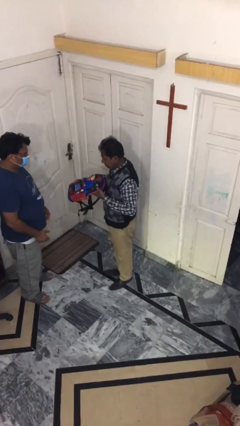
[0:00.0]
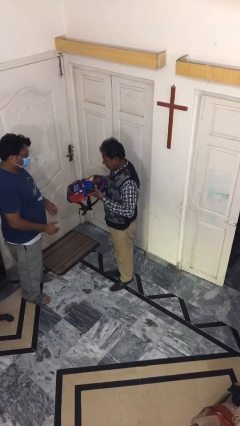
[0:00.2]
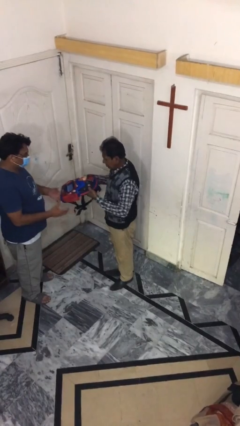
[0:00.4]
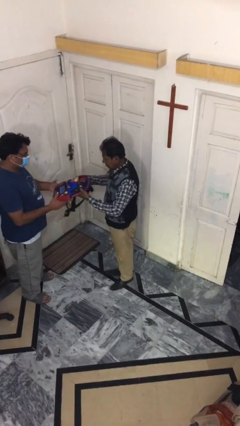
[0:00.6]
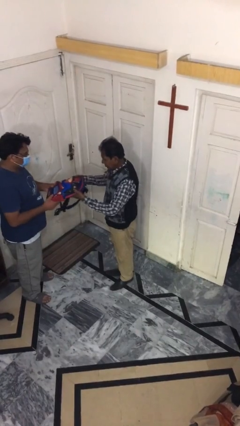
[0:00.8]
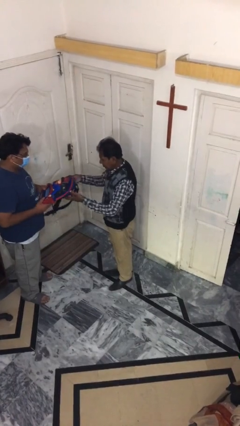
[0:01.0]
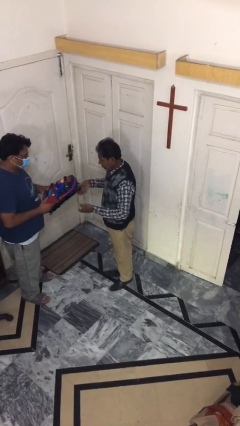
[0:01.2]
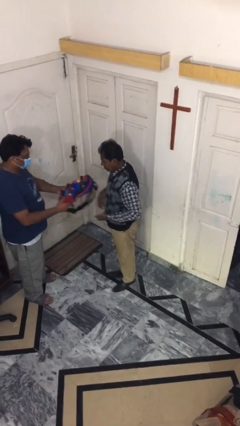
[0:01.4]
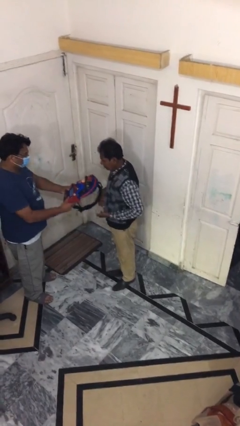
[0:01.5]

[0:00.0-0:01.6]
person transfers object to person

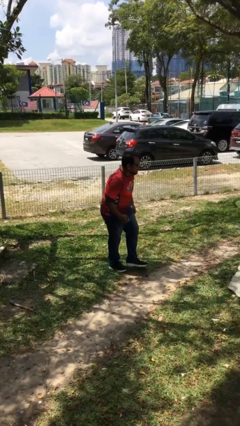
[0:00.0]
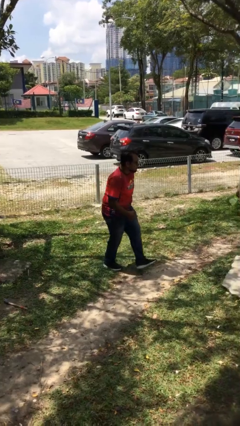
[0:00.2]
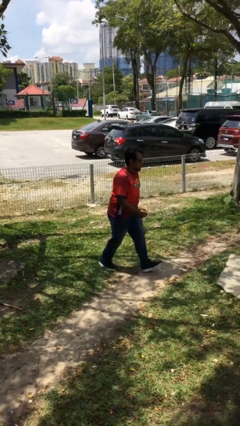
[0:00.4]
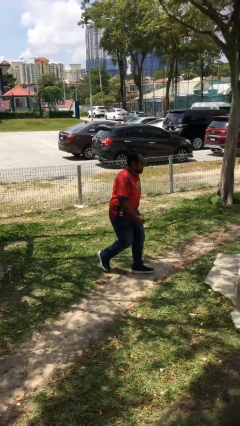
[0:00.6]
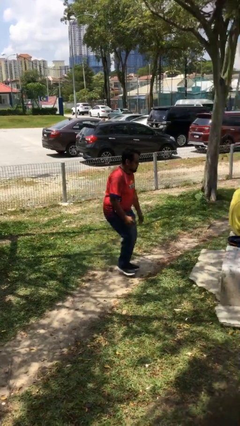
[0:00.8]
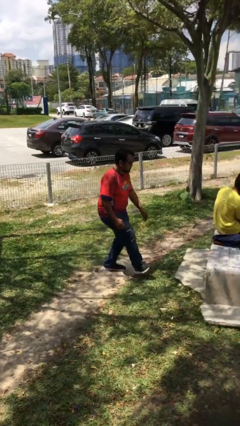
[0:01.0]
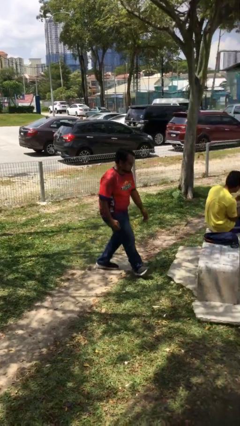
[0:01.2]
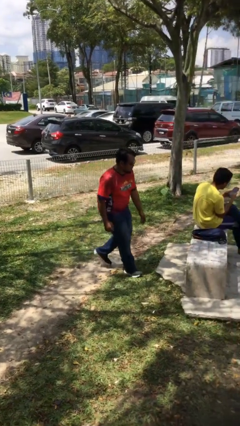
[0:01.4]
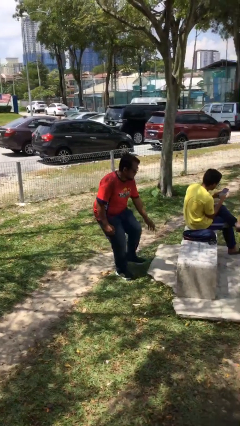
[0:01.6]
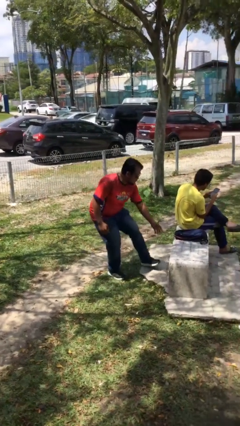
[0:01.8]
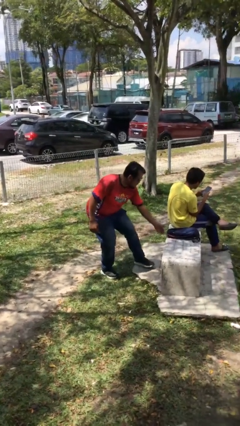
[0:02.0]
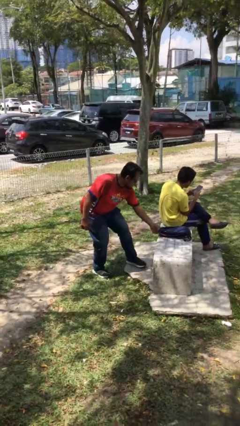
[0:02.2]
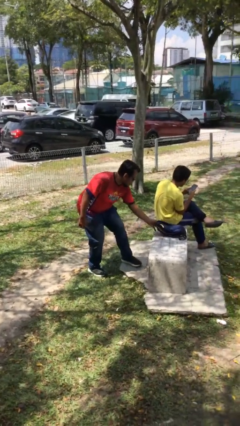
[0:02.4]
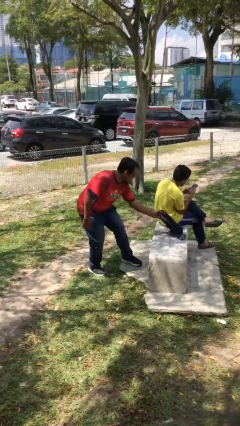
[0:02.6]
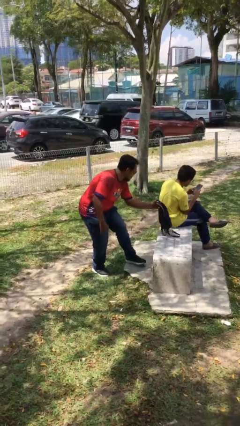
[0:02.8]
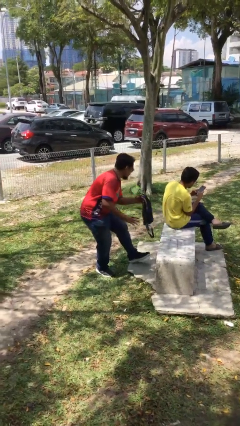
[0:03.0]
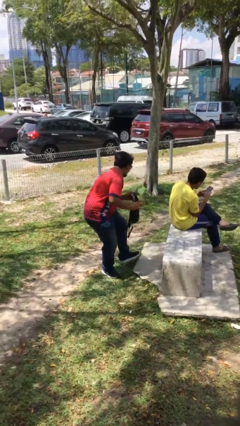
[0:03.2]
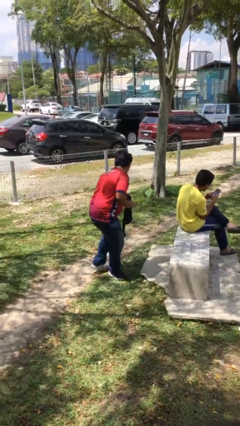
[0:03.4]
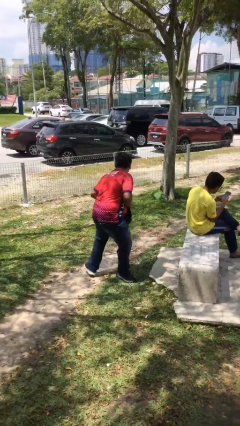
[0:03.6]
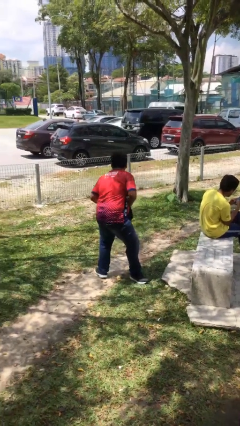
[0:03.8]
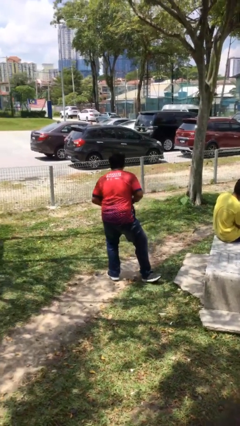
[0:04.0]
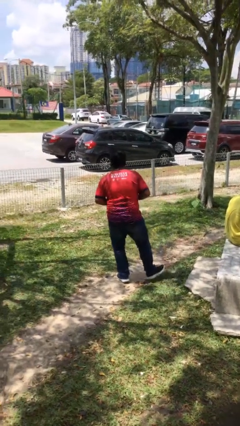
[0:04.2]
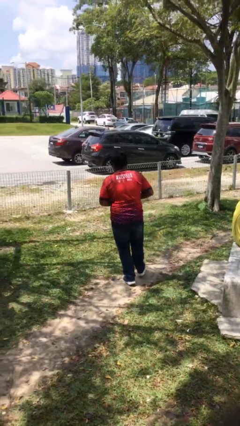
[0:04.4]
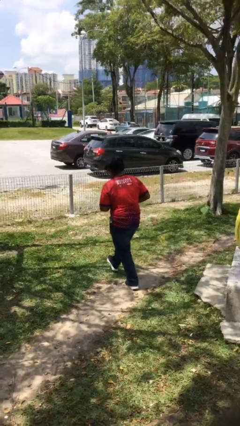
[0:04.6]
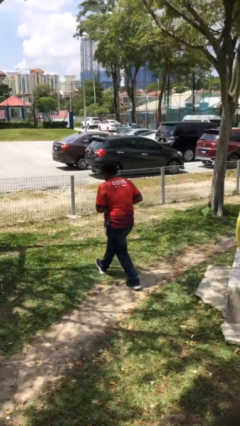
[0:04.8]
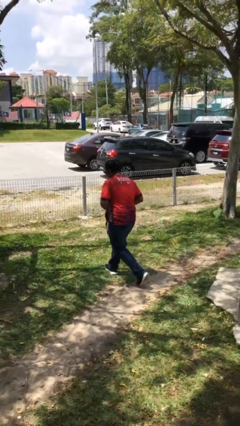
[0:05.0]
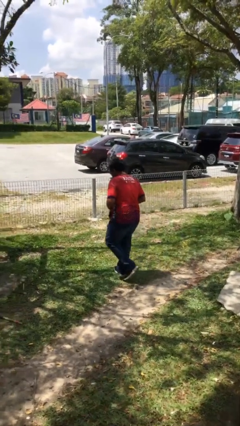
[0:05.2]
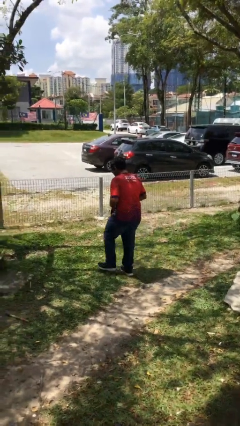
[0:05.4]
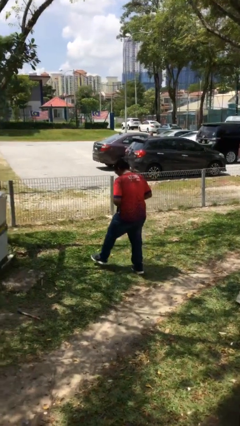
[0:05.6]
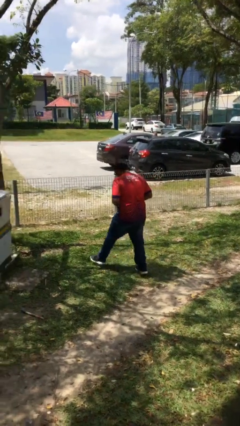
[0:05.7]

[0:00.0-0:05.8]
person steals object from person

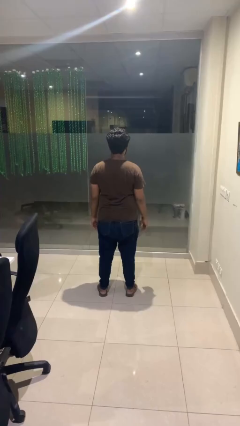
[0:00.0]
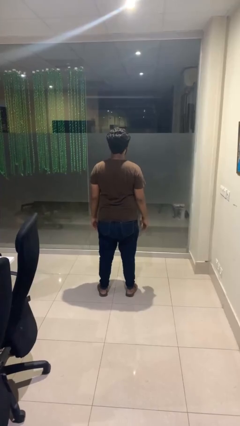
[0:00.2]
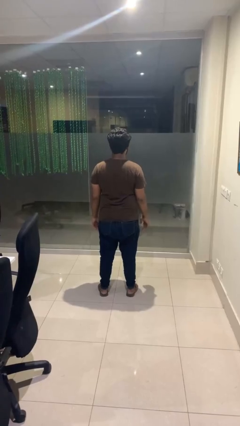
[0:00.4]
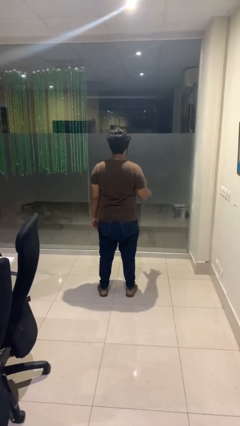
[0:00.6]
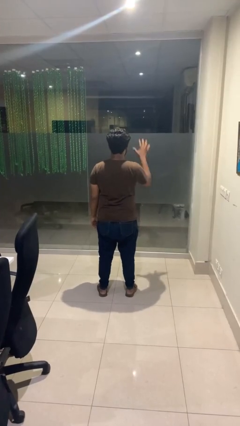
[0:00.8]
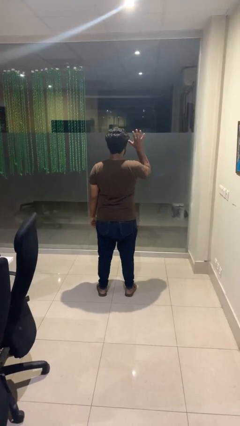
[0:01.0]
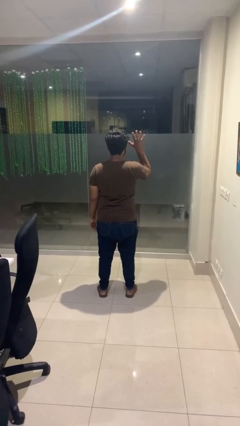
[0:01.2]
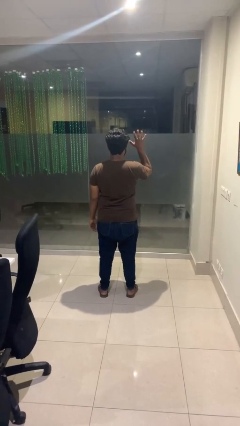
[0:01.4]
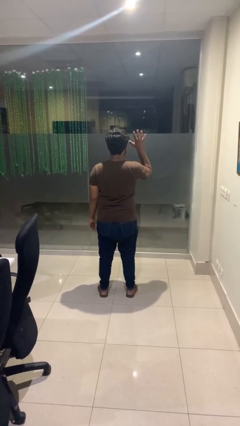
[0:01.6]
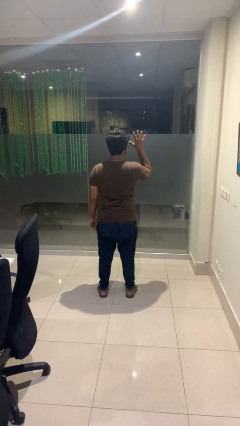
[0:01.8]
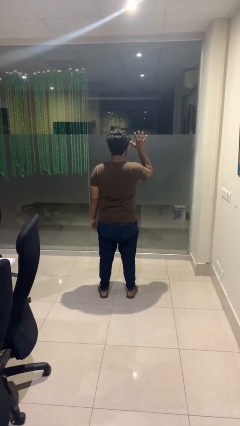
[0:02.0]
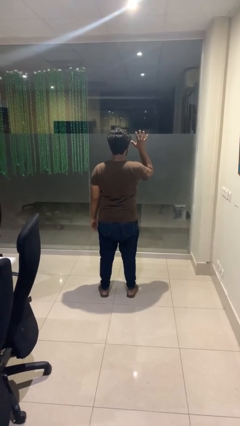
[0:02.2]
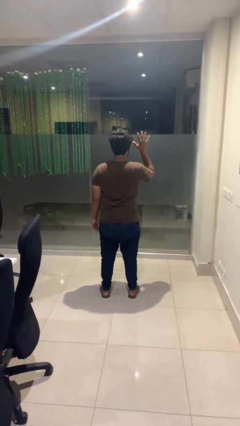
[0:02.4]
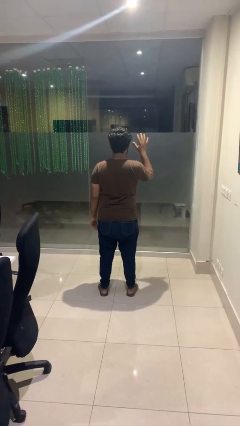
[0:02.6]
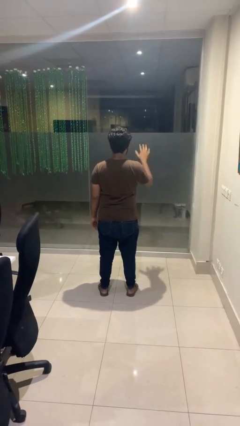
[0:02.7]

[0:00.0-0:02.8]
person gestures number five

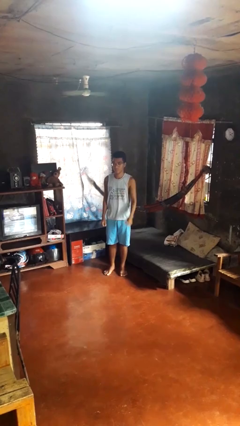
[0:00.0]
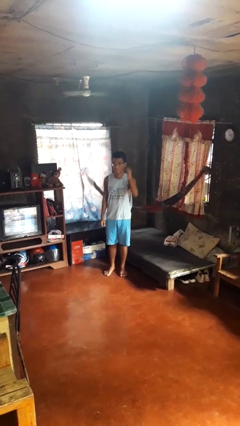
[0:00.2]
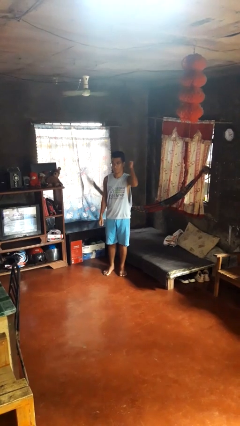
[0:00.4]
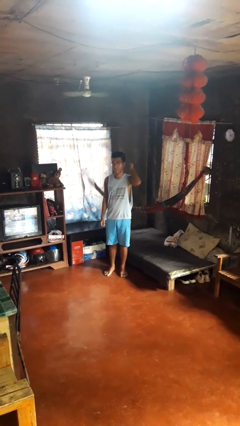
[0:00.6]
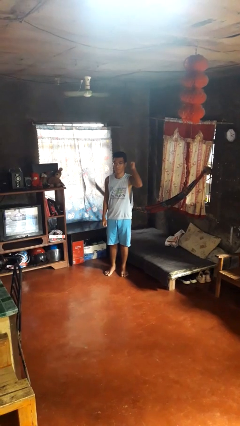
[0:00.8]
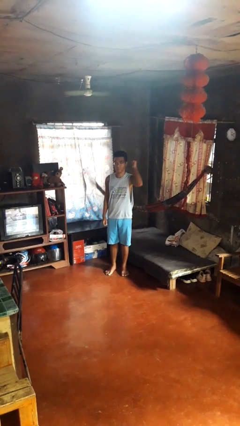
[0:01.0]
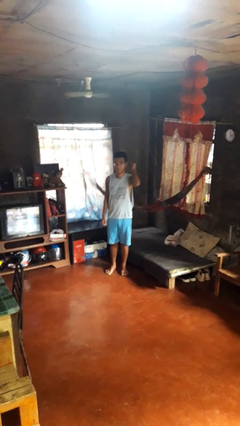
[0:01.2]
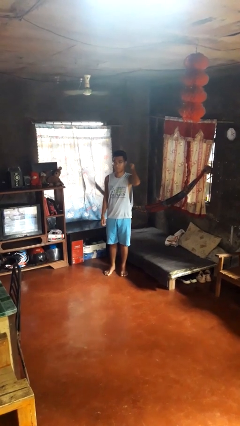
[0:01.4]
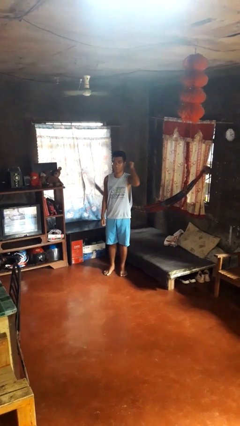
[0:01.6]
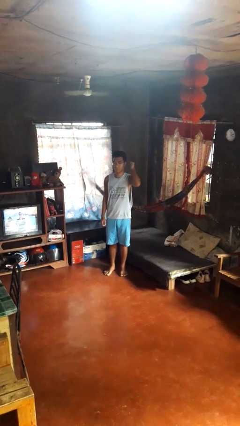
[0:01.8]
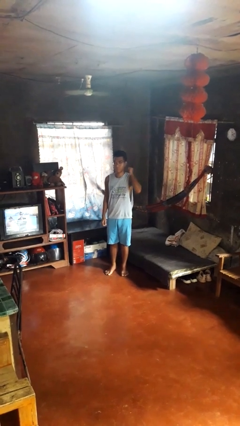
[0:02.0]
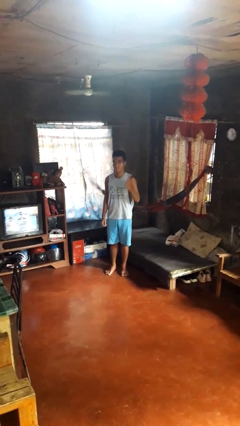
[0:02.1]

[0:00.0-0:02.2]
person gestures behind me

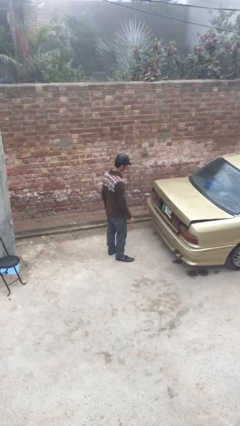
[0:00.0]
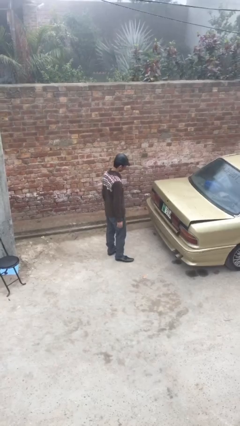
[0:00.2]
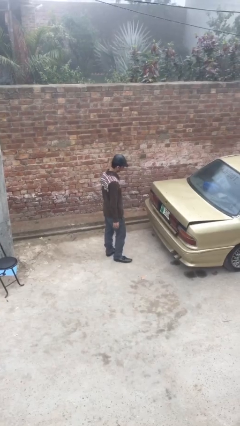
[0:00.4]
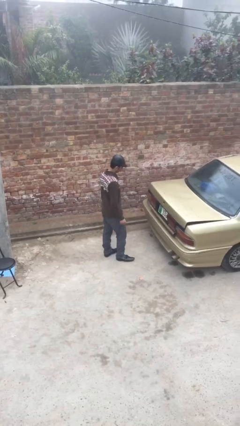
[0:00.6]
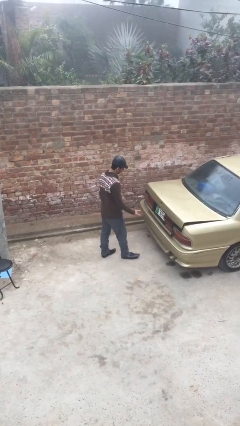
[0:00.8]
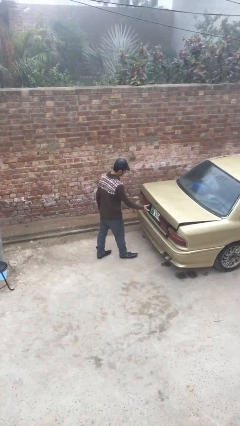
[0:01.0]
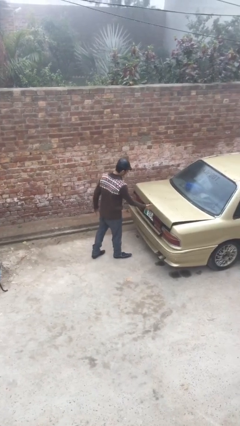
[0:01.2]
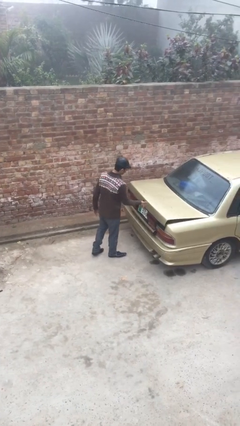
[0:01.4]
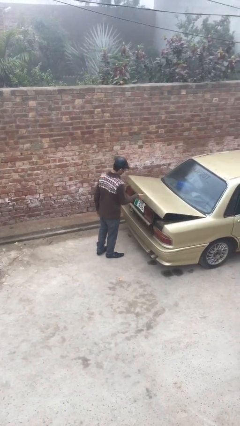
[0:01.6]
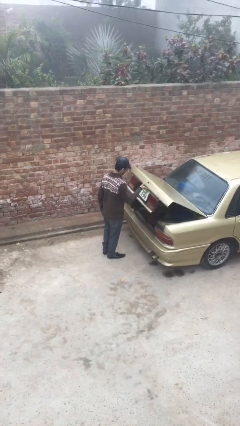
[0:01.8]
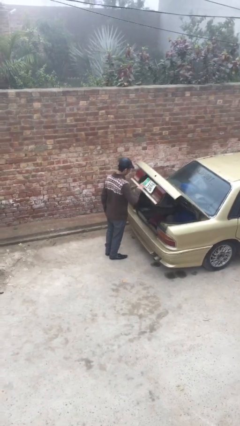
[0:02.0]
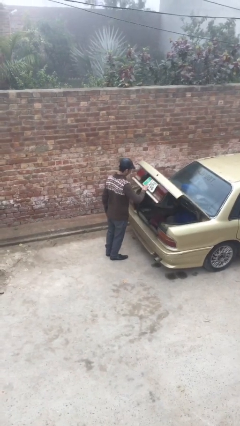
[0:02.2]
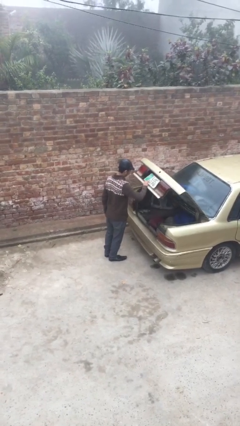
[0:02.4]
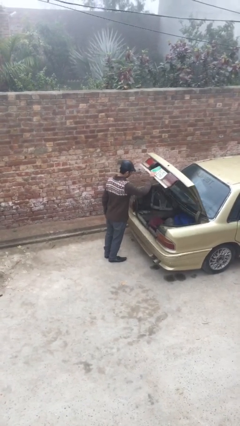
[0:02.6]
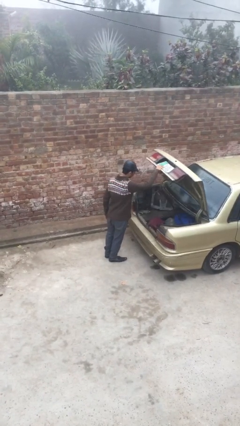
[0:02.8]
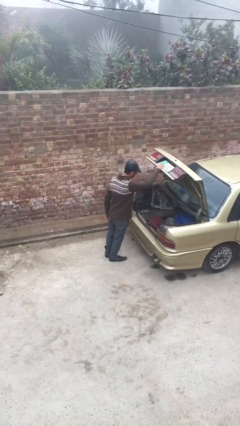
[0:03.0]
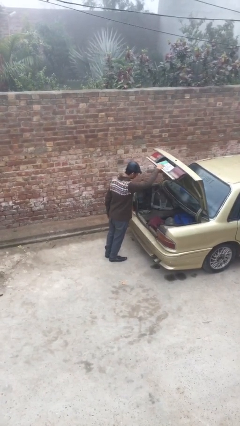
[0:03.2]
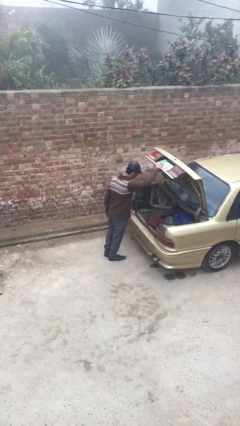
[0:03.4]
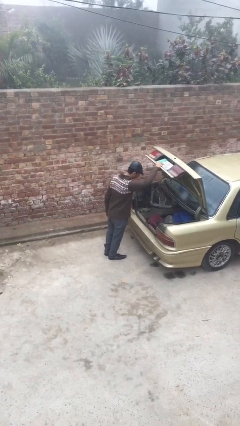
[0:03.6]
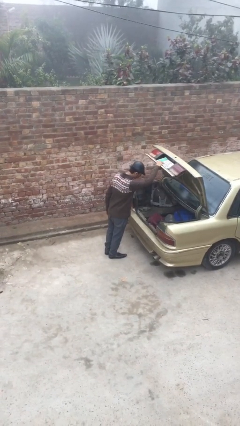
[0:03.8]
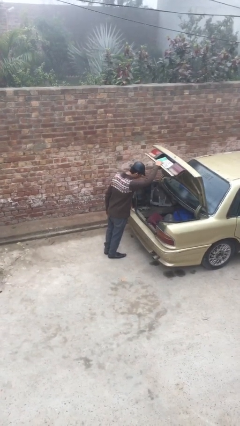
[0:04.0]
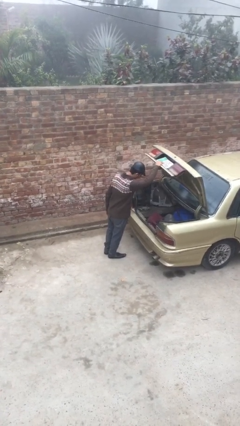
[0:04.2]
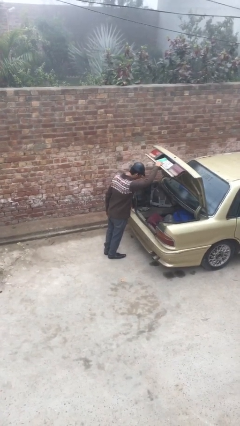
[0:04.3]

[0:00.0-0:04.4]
person opens car trunk

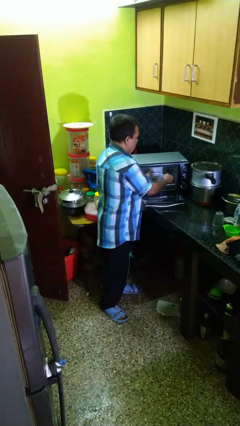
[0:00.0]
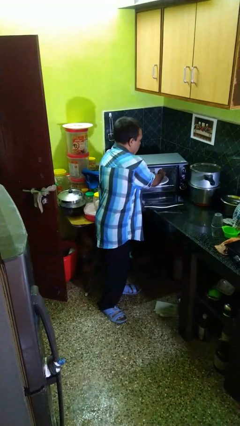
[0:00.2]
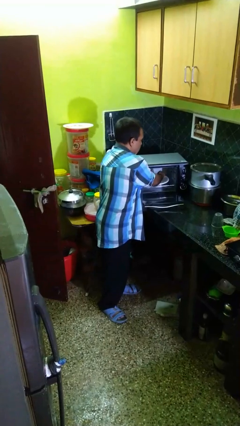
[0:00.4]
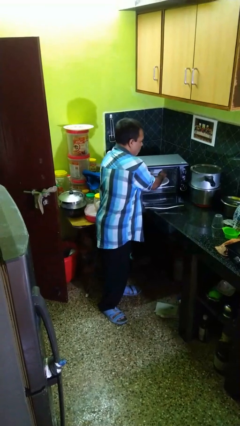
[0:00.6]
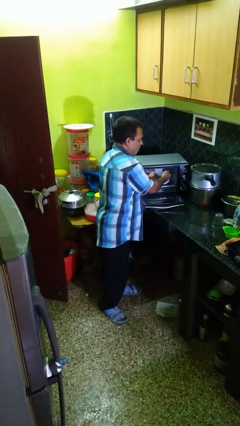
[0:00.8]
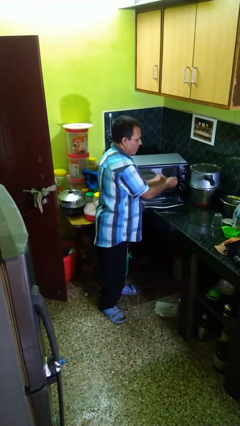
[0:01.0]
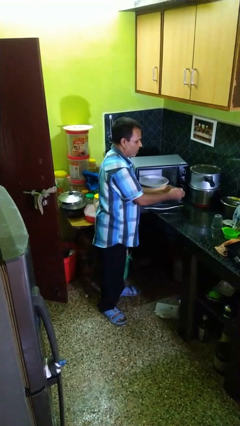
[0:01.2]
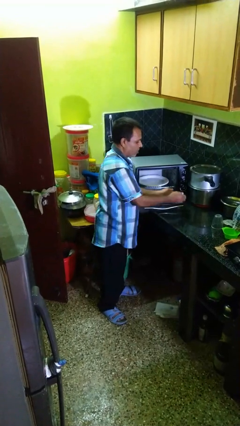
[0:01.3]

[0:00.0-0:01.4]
person takes object from microwave
